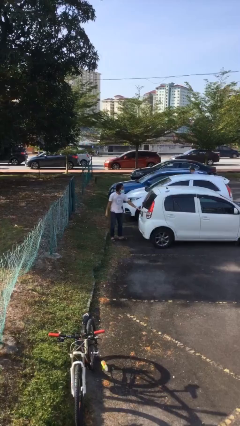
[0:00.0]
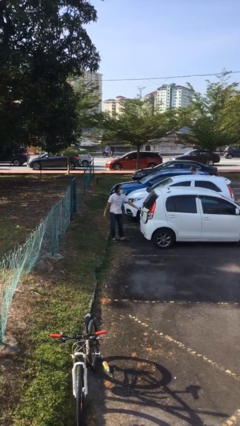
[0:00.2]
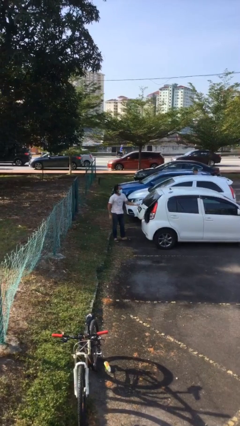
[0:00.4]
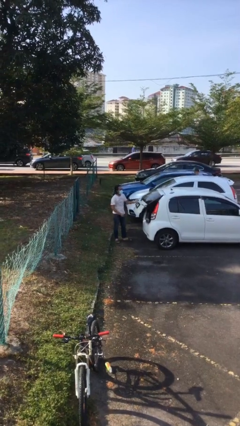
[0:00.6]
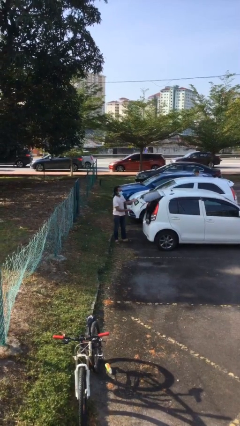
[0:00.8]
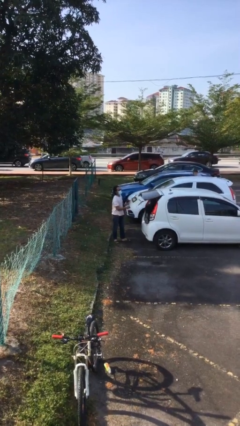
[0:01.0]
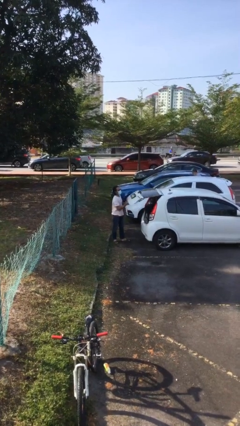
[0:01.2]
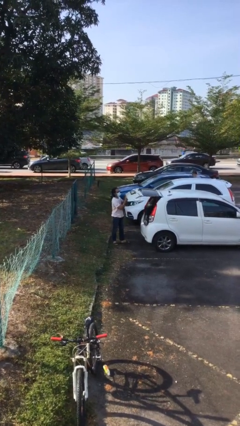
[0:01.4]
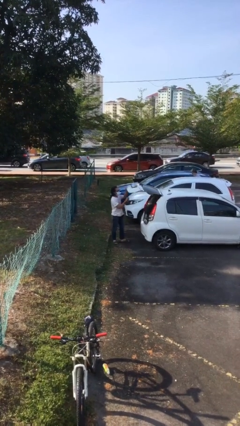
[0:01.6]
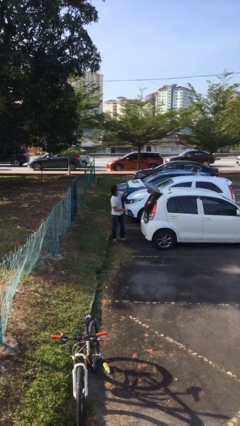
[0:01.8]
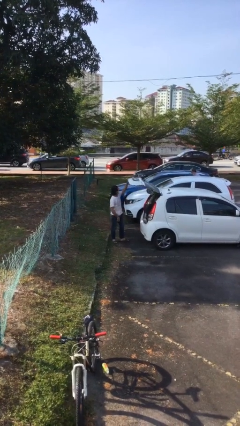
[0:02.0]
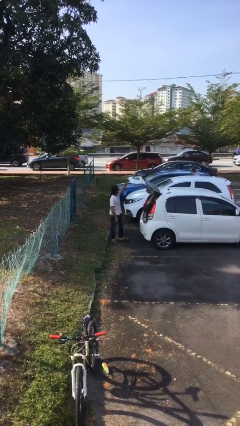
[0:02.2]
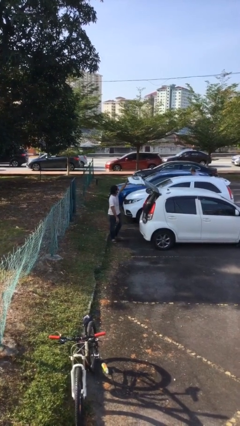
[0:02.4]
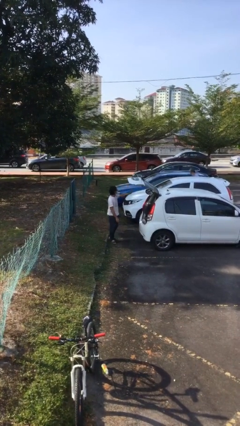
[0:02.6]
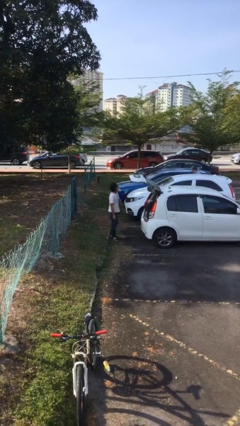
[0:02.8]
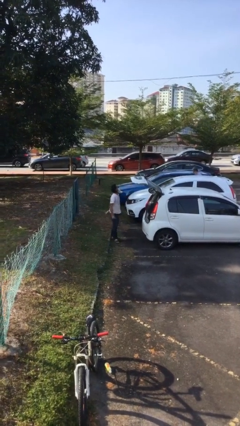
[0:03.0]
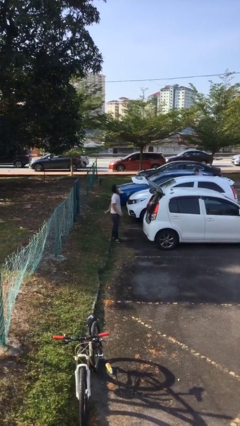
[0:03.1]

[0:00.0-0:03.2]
person opens car trunk

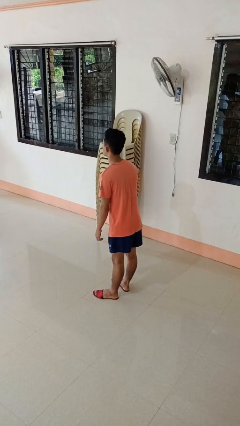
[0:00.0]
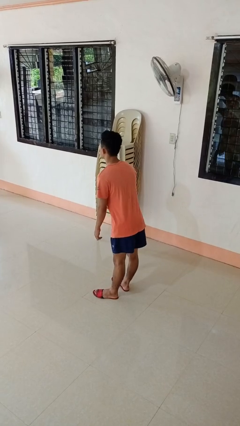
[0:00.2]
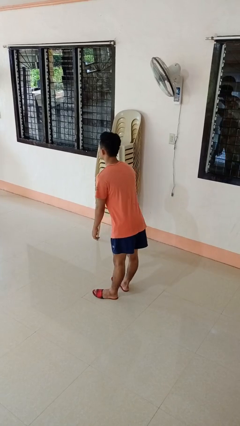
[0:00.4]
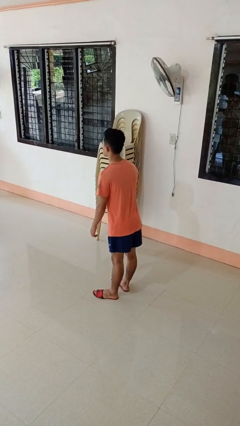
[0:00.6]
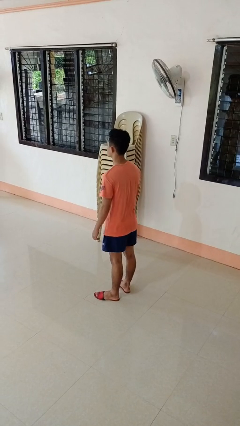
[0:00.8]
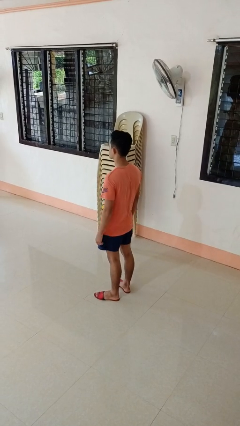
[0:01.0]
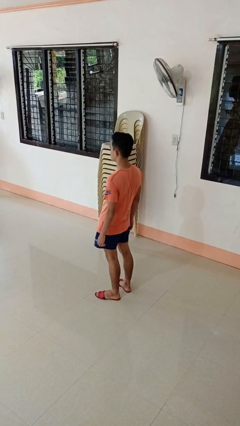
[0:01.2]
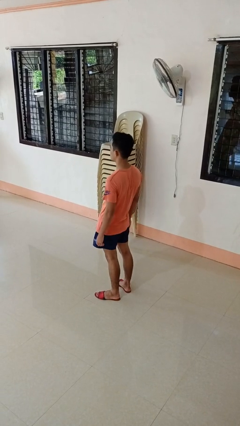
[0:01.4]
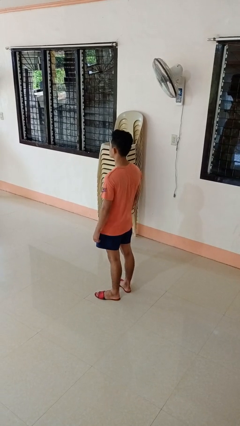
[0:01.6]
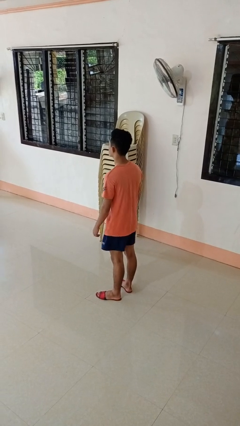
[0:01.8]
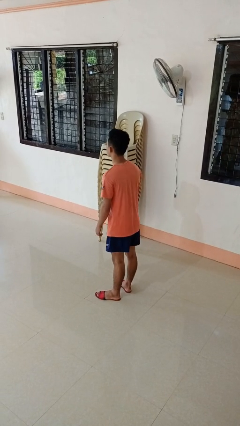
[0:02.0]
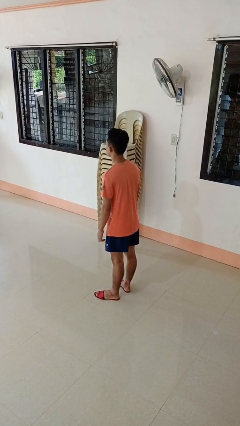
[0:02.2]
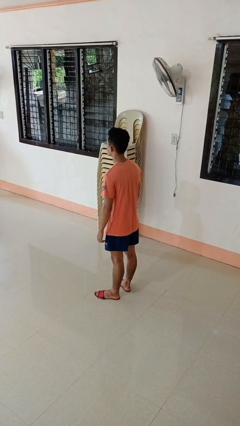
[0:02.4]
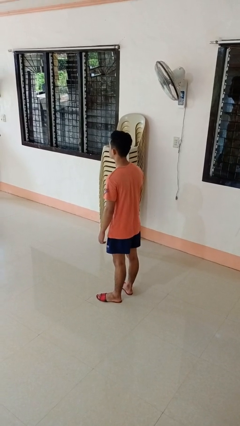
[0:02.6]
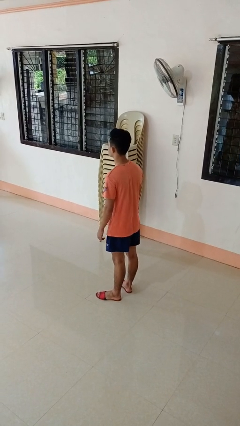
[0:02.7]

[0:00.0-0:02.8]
person wiggles hips

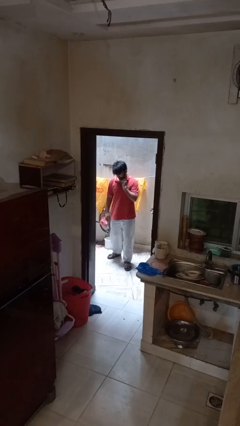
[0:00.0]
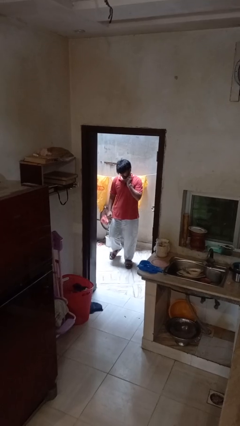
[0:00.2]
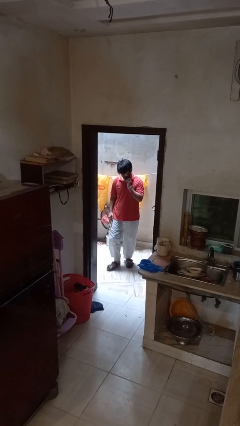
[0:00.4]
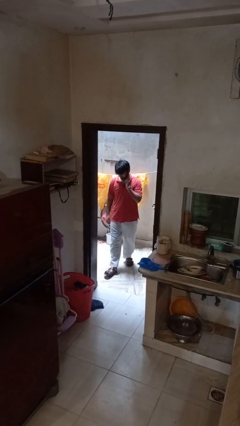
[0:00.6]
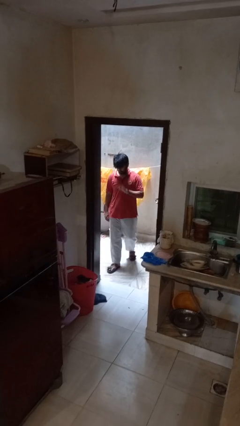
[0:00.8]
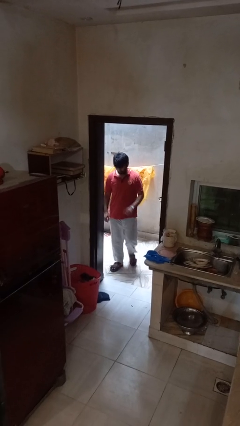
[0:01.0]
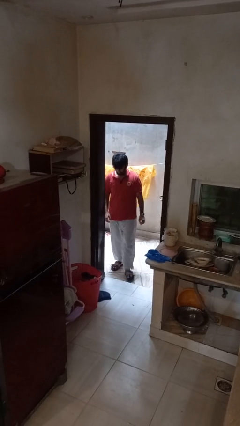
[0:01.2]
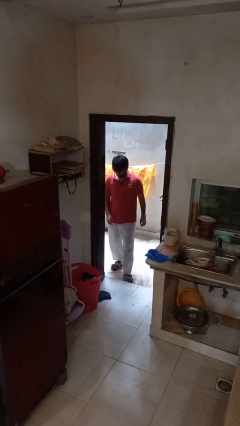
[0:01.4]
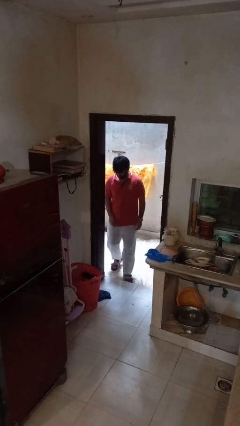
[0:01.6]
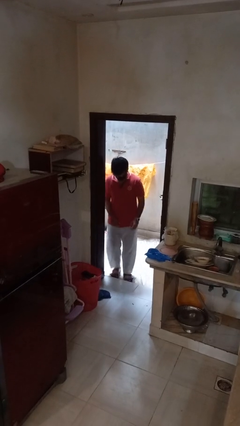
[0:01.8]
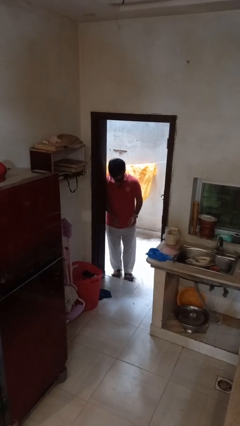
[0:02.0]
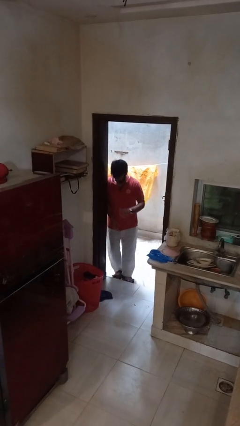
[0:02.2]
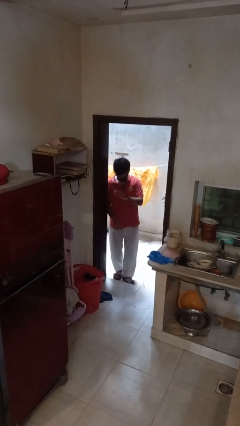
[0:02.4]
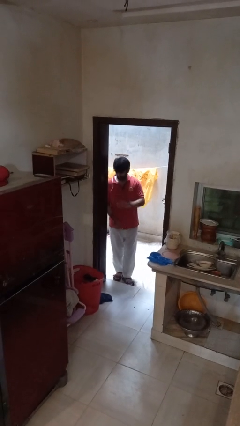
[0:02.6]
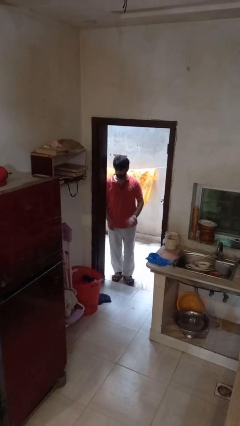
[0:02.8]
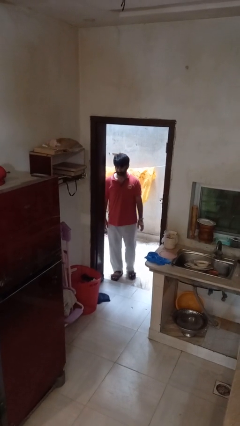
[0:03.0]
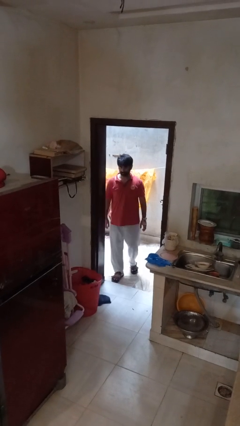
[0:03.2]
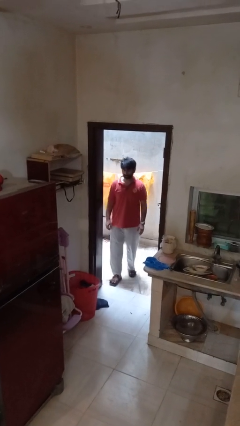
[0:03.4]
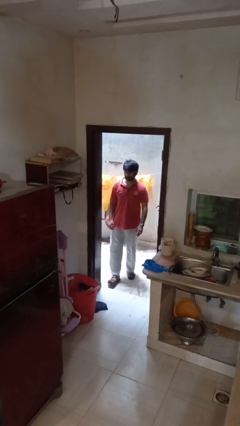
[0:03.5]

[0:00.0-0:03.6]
person bumps into wall

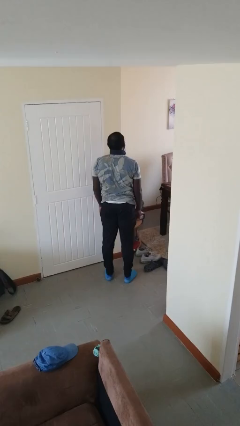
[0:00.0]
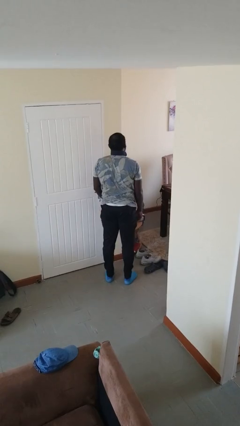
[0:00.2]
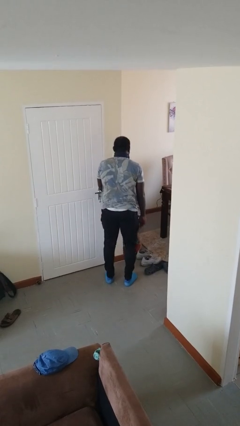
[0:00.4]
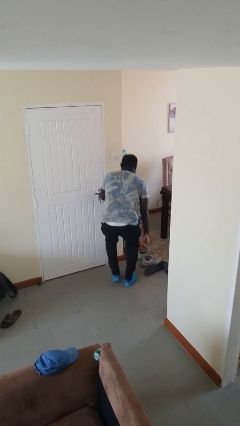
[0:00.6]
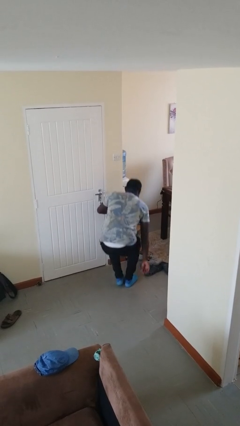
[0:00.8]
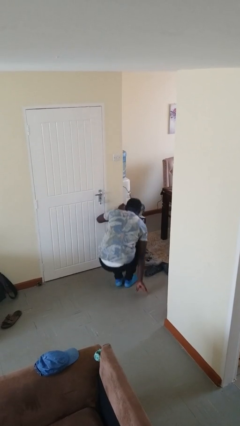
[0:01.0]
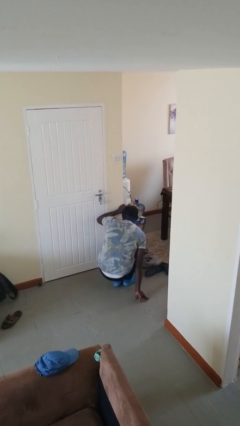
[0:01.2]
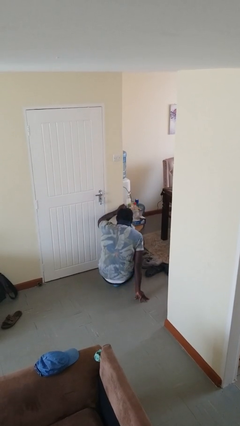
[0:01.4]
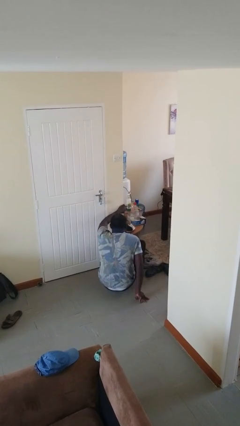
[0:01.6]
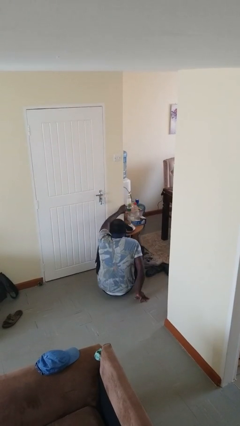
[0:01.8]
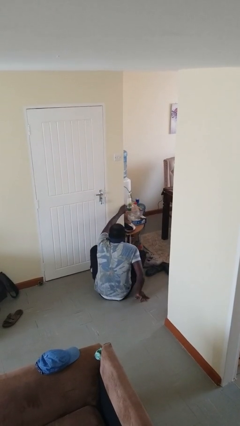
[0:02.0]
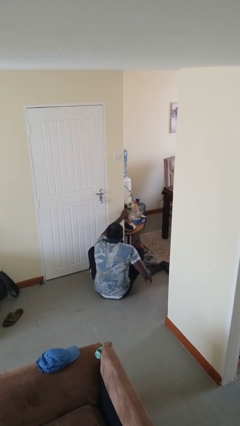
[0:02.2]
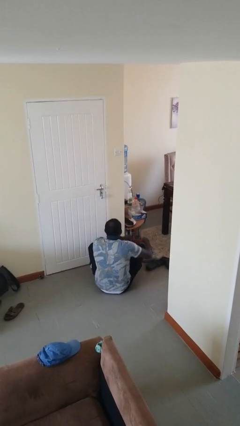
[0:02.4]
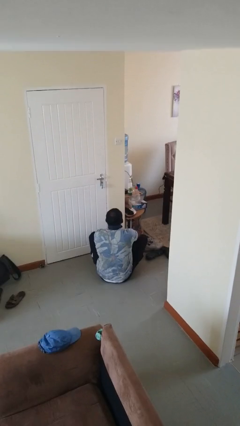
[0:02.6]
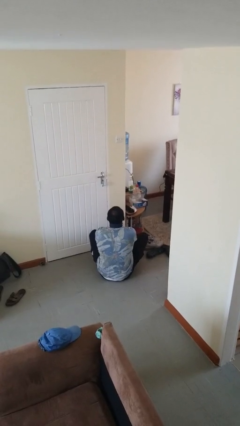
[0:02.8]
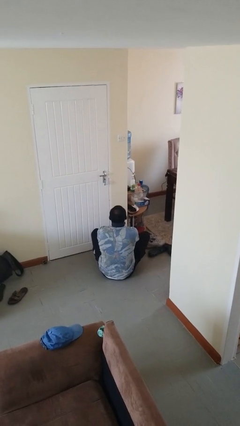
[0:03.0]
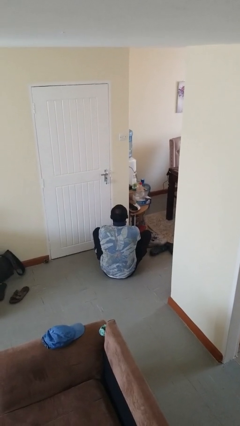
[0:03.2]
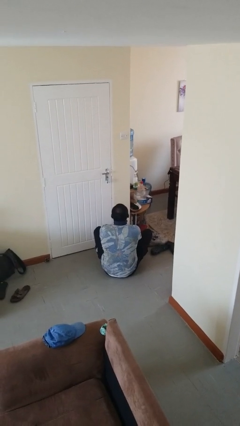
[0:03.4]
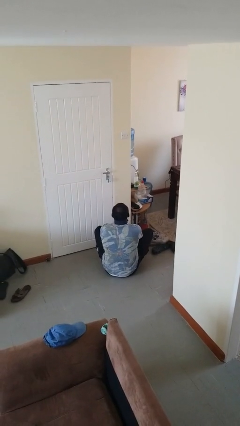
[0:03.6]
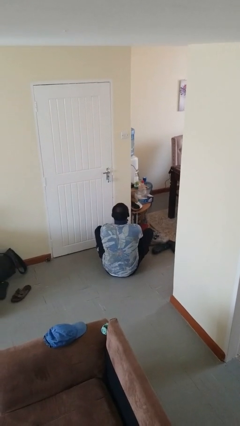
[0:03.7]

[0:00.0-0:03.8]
person sits crisscross

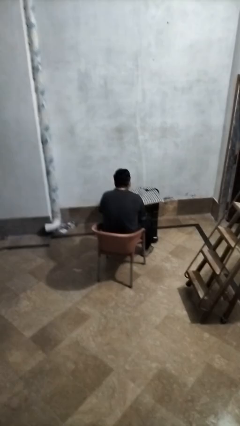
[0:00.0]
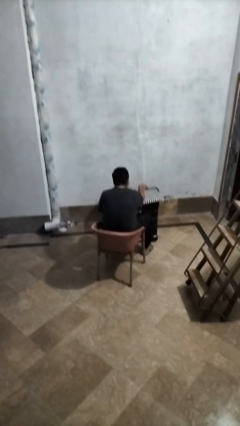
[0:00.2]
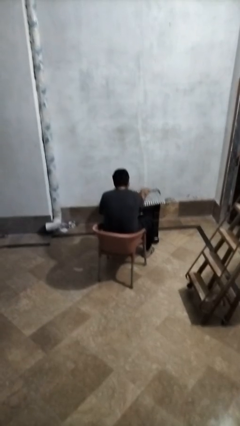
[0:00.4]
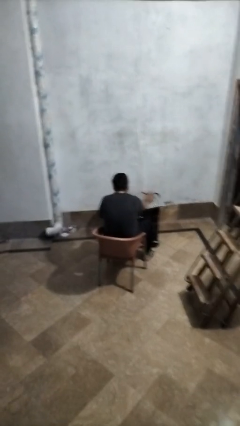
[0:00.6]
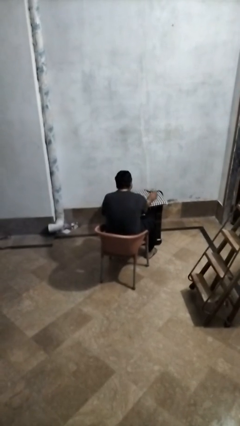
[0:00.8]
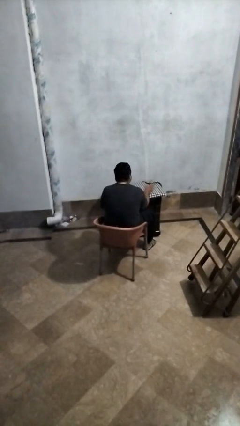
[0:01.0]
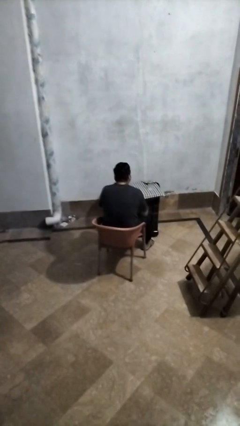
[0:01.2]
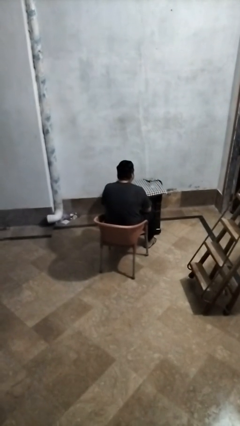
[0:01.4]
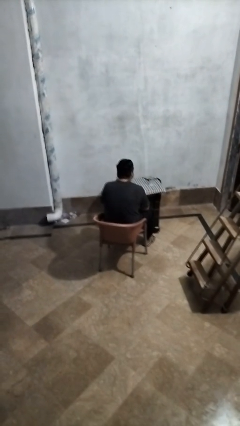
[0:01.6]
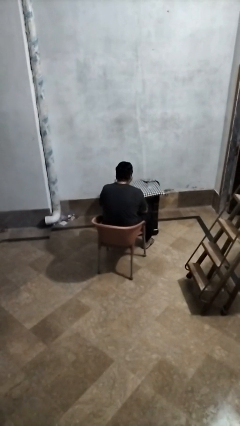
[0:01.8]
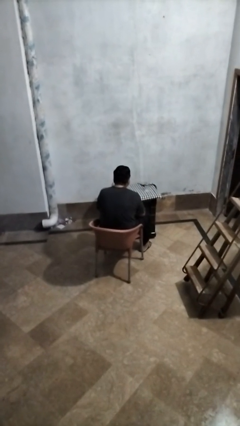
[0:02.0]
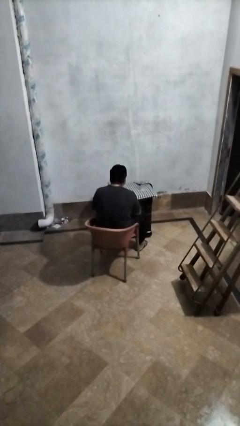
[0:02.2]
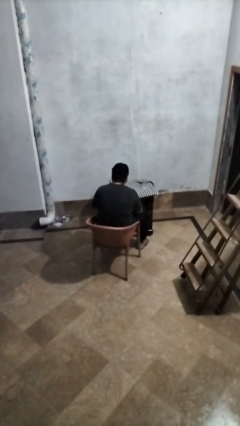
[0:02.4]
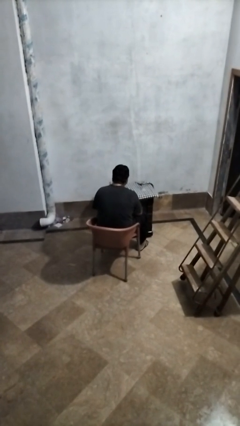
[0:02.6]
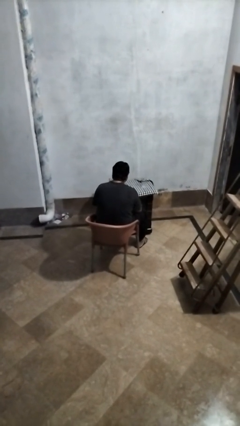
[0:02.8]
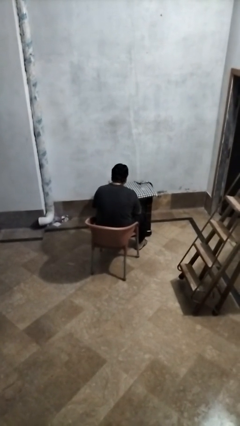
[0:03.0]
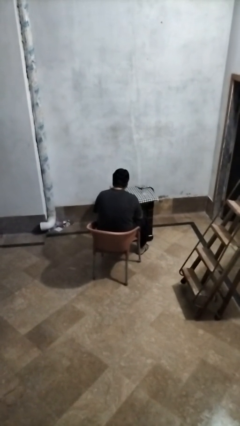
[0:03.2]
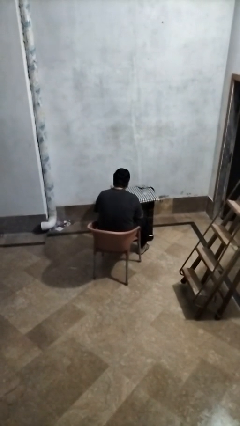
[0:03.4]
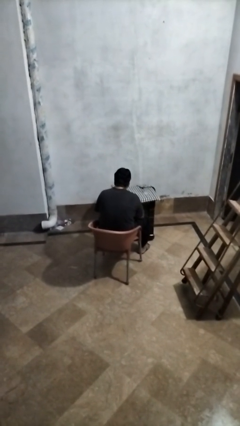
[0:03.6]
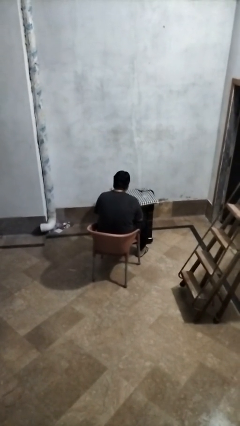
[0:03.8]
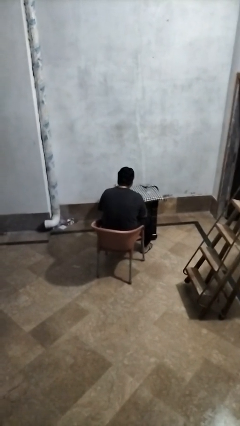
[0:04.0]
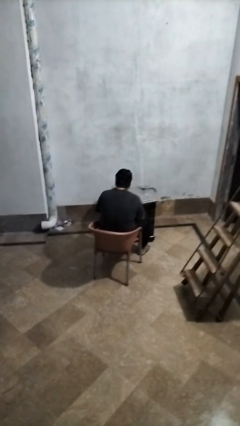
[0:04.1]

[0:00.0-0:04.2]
person sets upright glass
